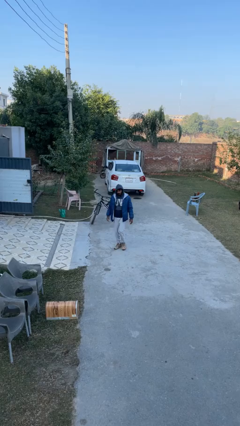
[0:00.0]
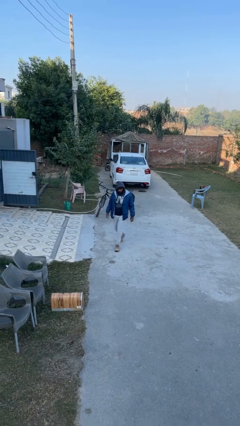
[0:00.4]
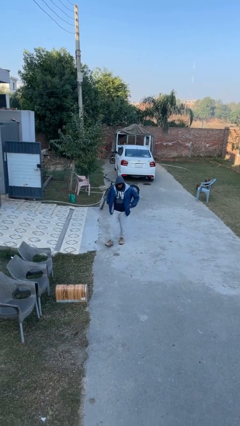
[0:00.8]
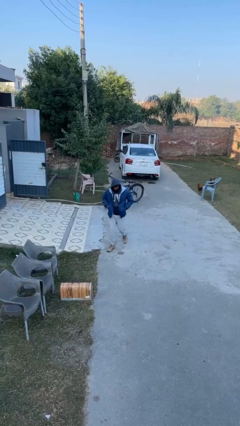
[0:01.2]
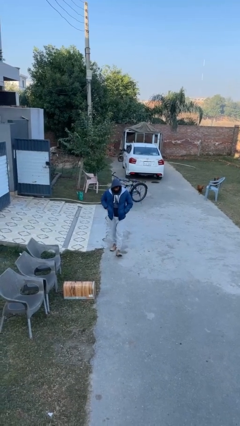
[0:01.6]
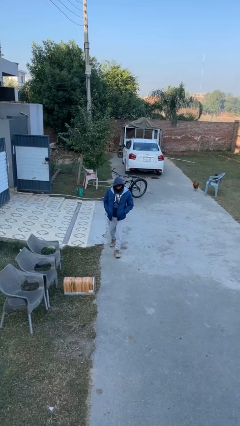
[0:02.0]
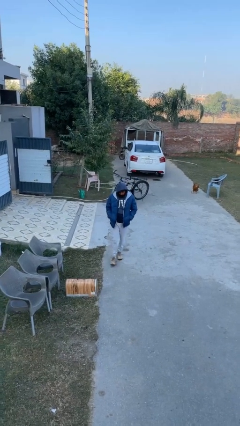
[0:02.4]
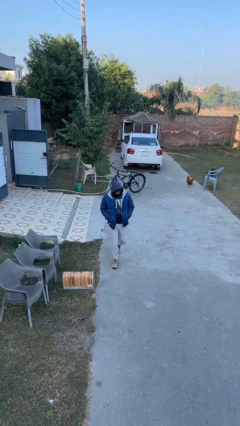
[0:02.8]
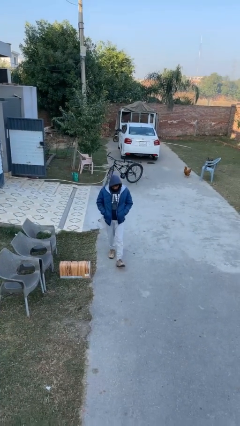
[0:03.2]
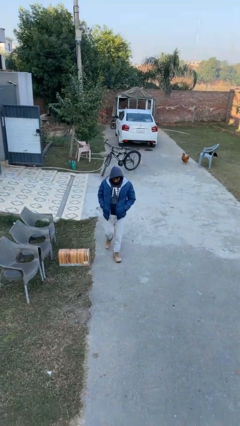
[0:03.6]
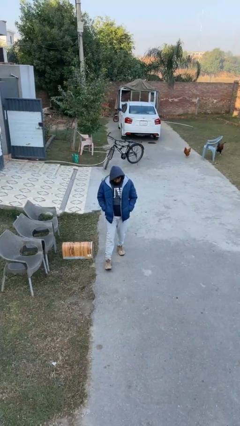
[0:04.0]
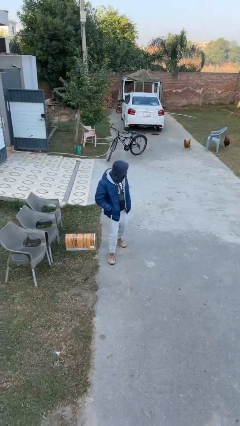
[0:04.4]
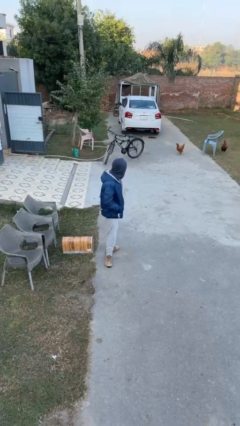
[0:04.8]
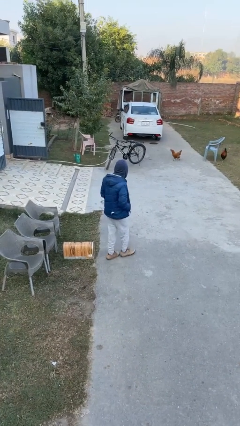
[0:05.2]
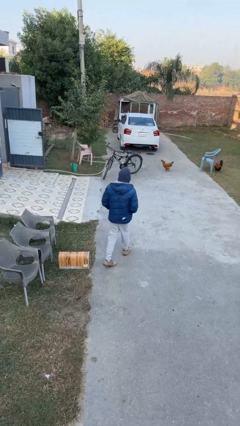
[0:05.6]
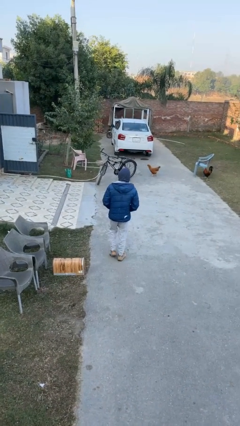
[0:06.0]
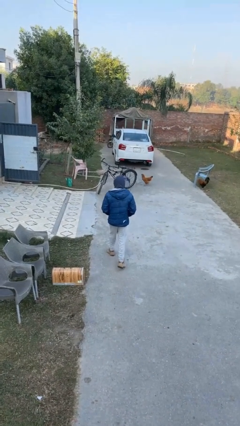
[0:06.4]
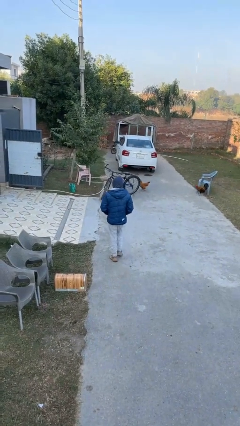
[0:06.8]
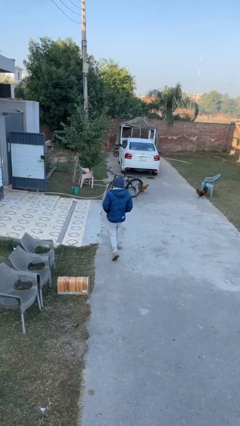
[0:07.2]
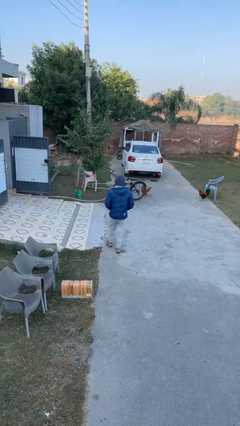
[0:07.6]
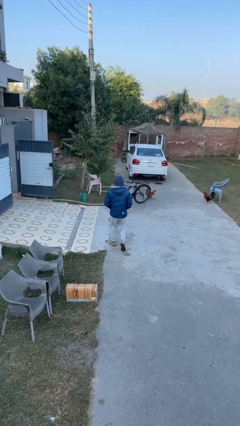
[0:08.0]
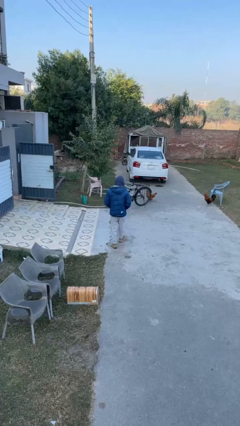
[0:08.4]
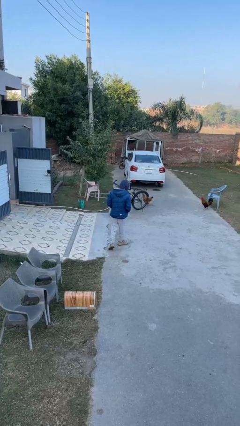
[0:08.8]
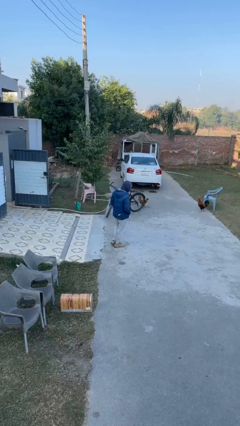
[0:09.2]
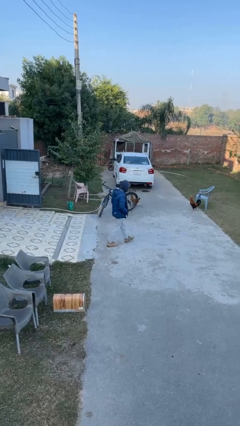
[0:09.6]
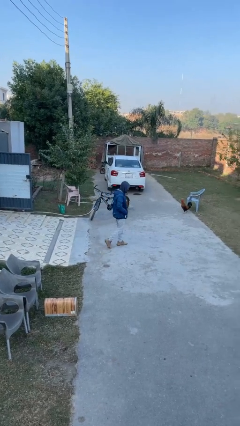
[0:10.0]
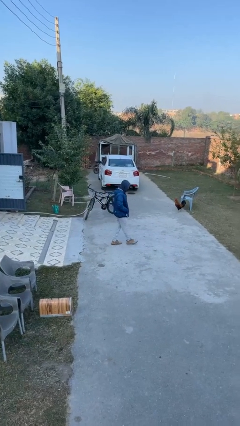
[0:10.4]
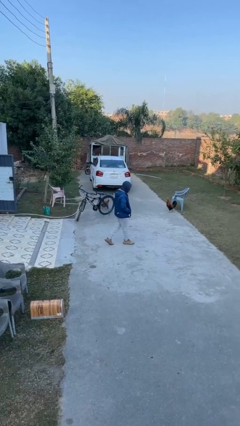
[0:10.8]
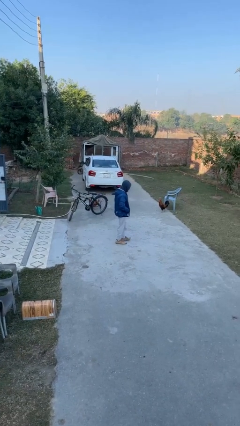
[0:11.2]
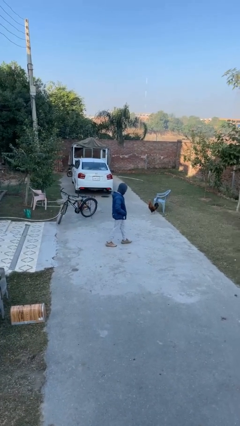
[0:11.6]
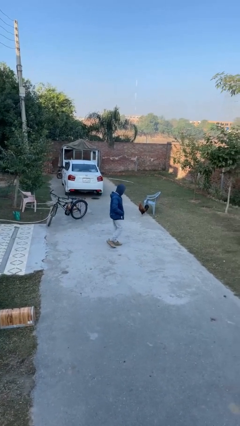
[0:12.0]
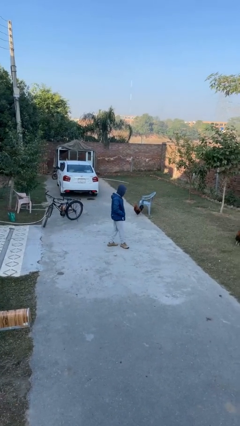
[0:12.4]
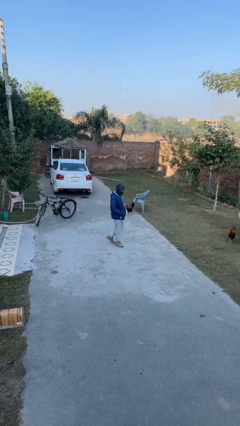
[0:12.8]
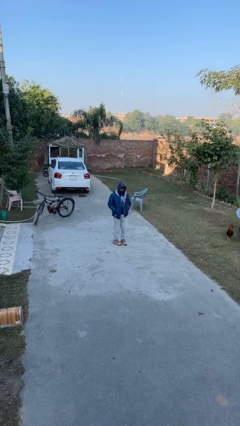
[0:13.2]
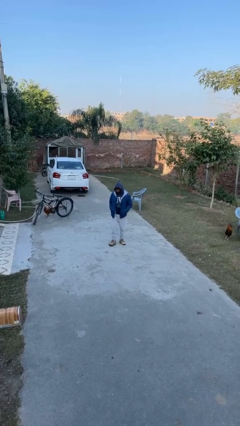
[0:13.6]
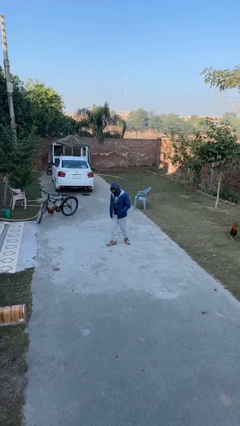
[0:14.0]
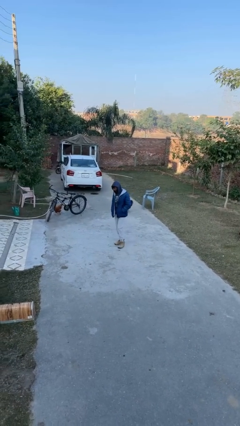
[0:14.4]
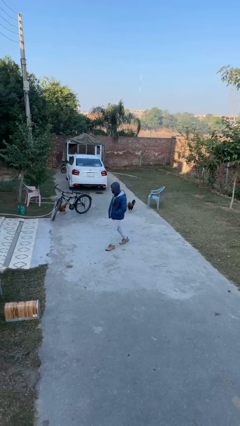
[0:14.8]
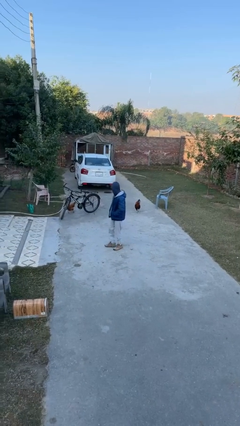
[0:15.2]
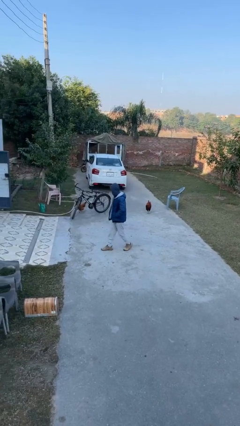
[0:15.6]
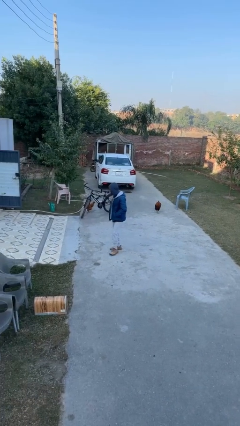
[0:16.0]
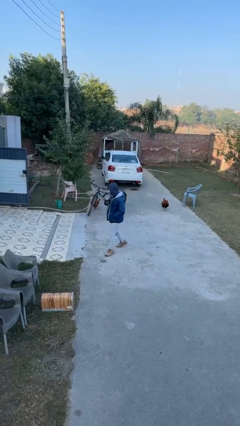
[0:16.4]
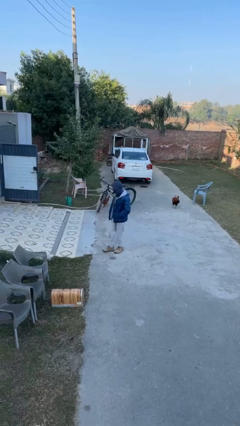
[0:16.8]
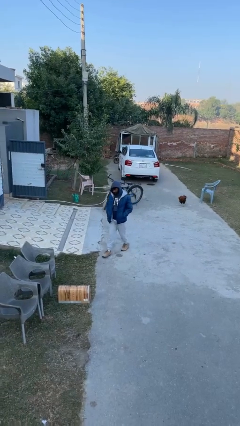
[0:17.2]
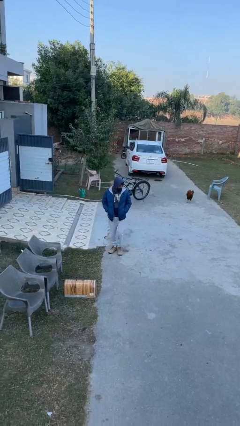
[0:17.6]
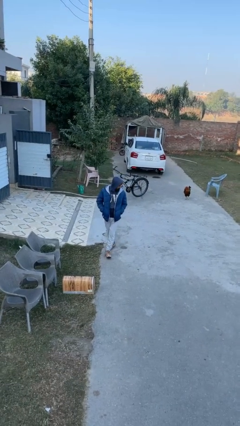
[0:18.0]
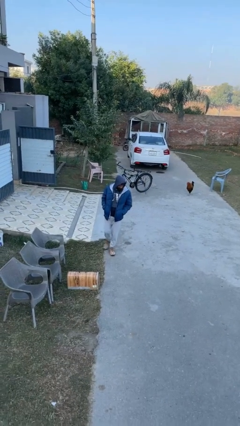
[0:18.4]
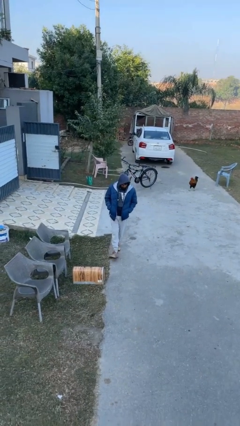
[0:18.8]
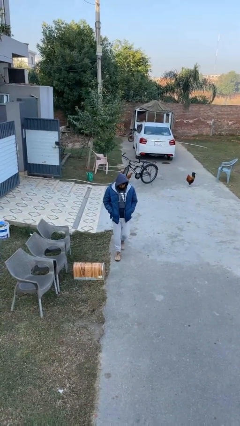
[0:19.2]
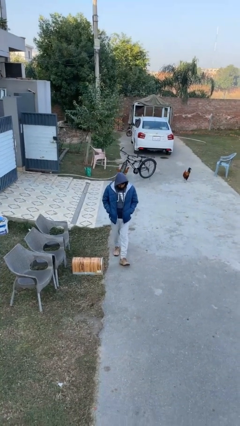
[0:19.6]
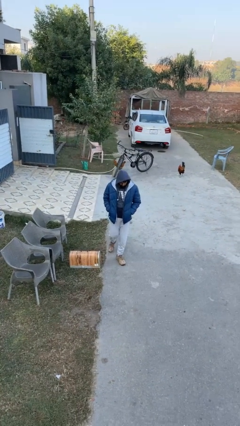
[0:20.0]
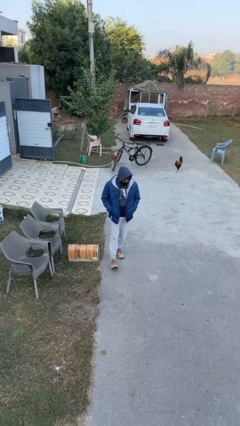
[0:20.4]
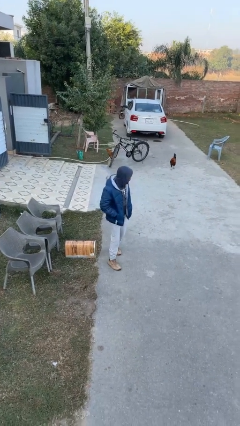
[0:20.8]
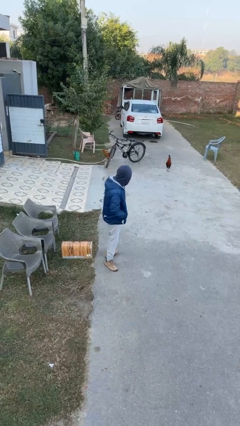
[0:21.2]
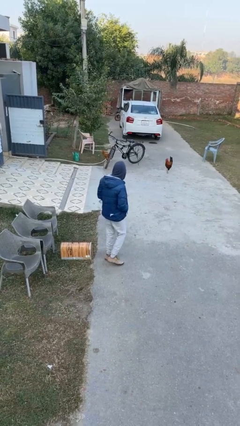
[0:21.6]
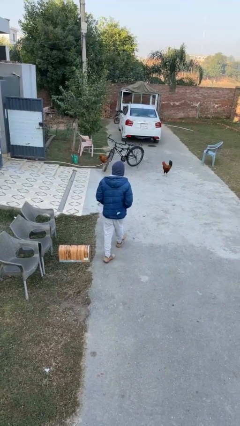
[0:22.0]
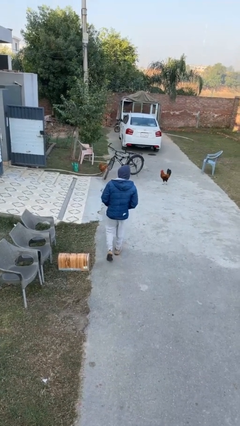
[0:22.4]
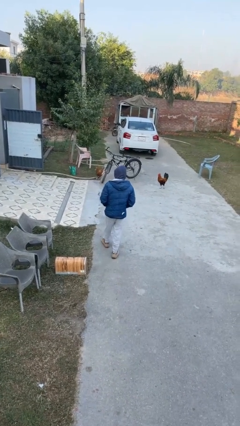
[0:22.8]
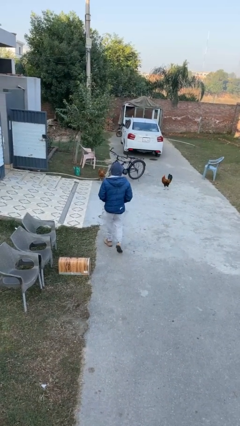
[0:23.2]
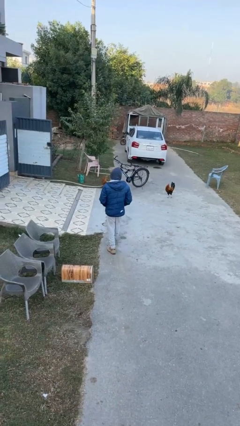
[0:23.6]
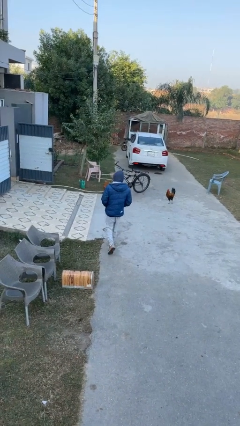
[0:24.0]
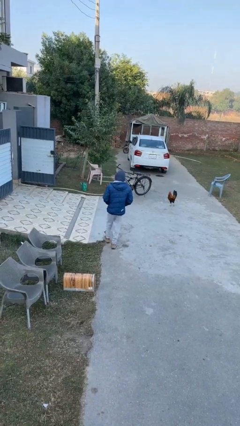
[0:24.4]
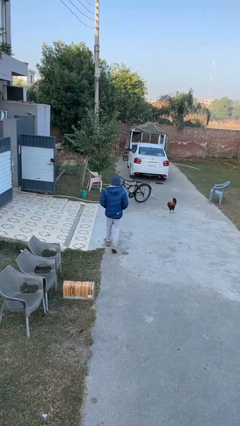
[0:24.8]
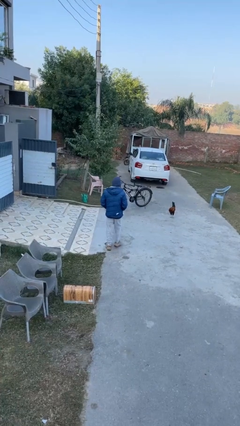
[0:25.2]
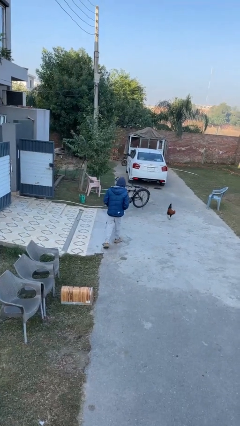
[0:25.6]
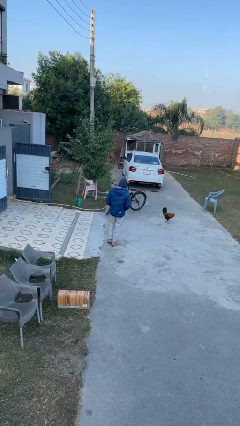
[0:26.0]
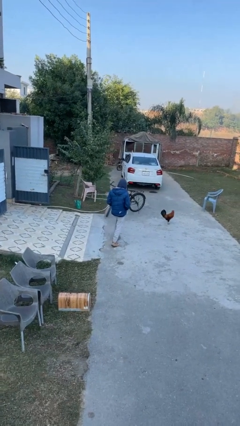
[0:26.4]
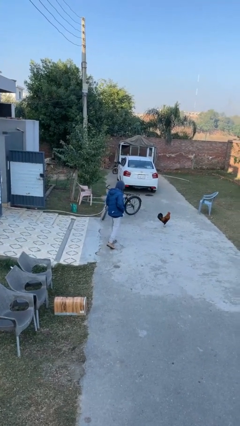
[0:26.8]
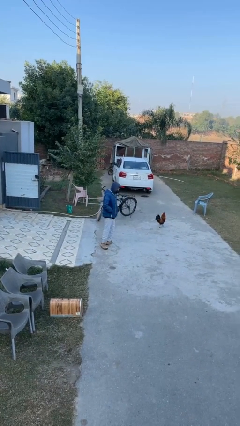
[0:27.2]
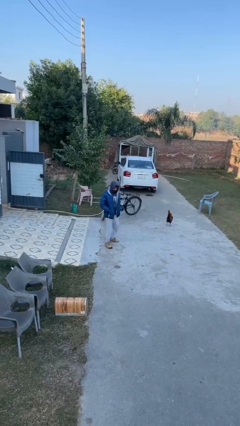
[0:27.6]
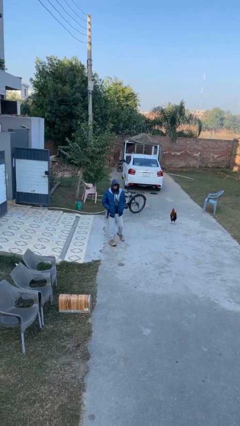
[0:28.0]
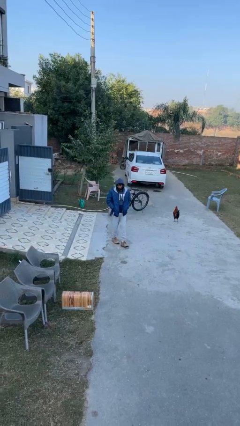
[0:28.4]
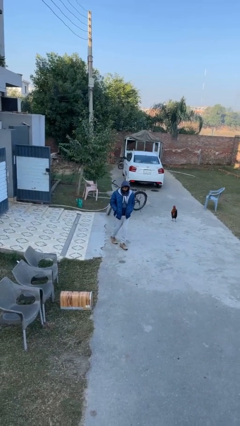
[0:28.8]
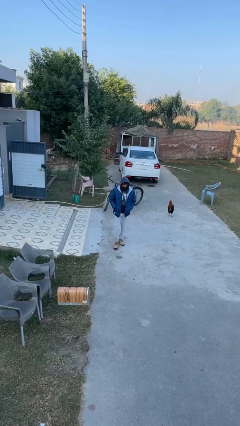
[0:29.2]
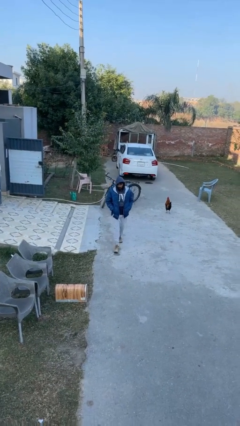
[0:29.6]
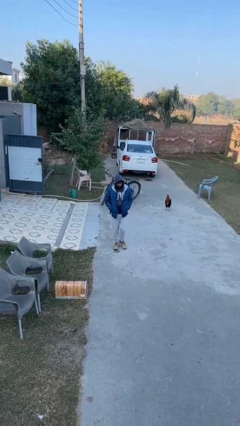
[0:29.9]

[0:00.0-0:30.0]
person walks

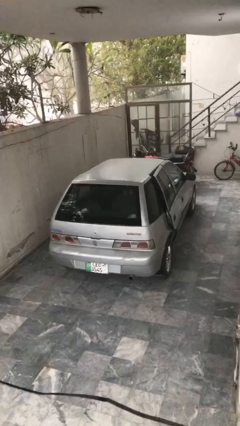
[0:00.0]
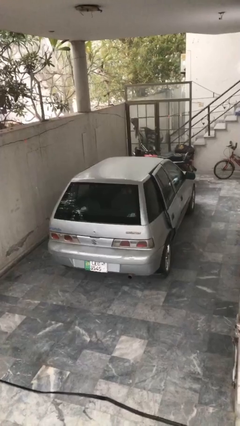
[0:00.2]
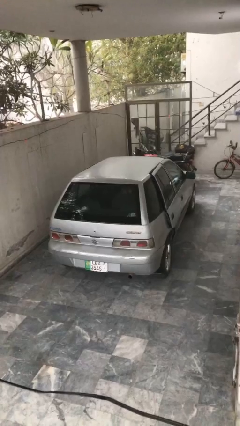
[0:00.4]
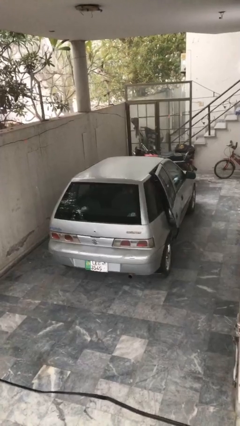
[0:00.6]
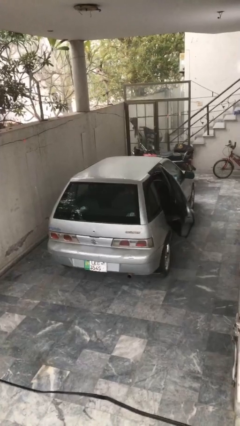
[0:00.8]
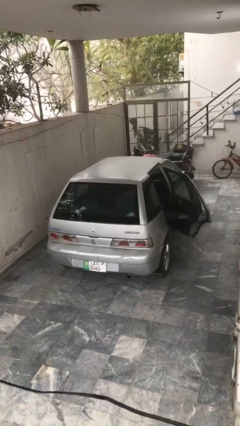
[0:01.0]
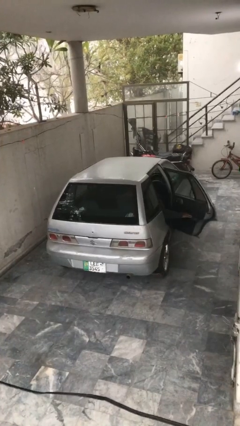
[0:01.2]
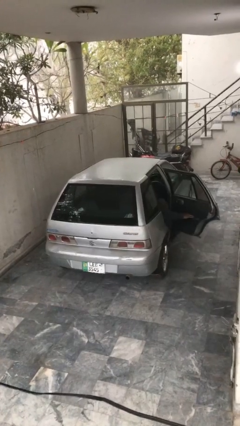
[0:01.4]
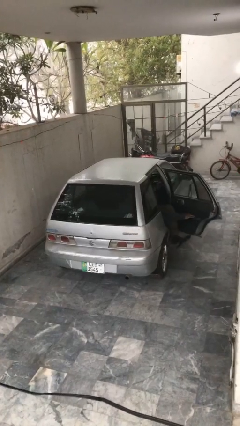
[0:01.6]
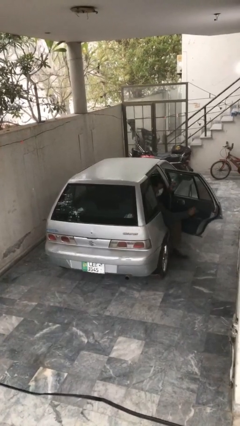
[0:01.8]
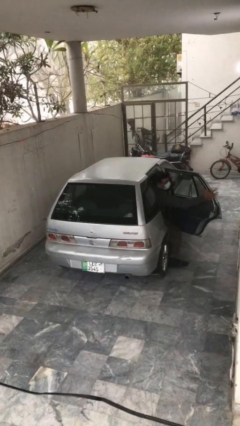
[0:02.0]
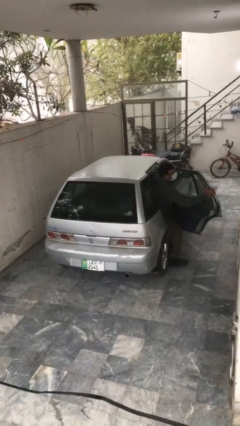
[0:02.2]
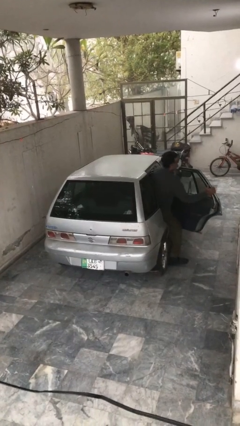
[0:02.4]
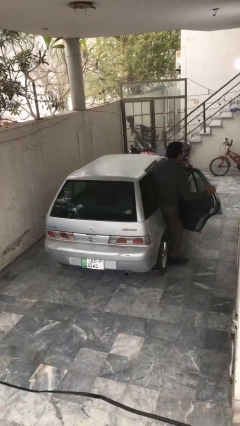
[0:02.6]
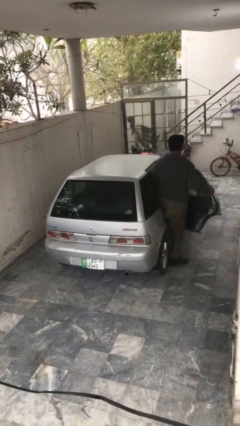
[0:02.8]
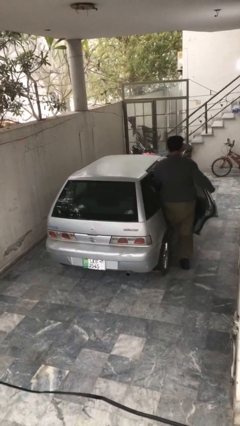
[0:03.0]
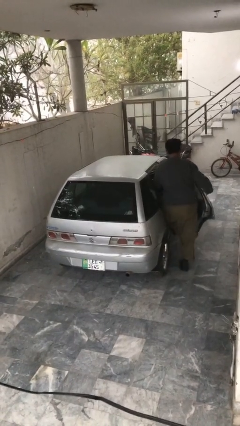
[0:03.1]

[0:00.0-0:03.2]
car drops off person

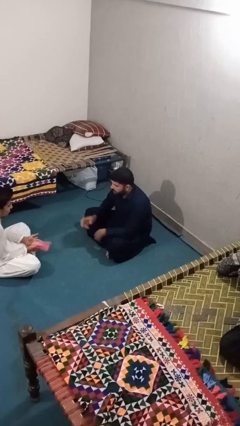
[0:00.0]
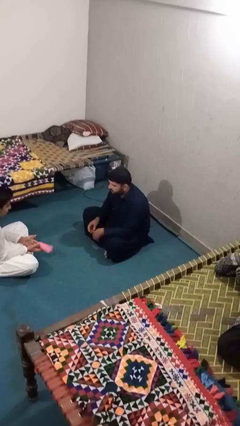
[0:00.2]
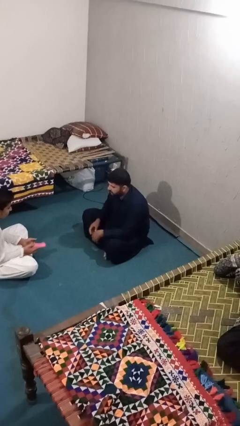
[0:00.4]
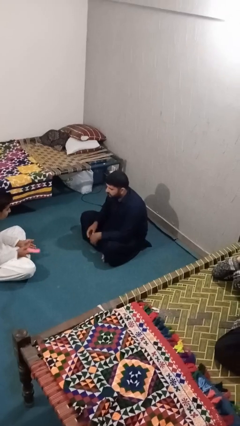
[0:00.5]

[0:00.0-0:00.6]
person throws object to person
